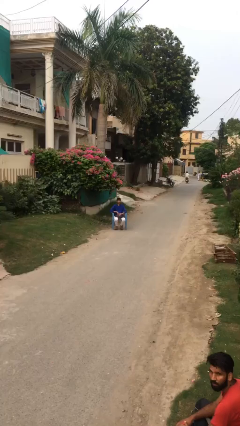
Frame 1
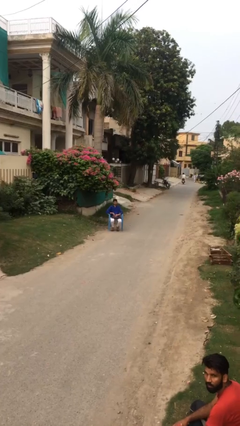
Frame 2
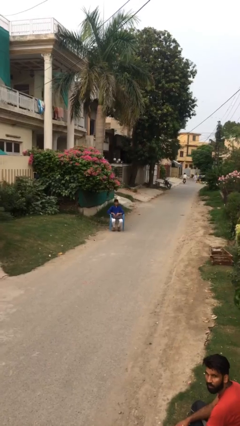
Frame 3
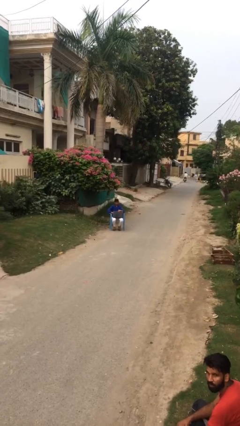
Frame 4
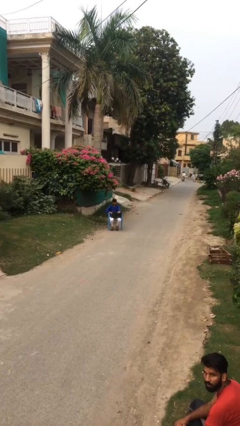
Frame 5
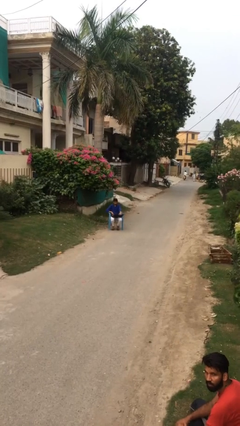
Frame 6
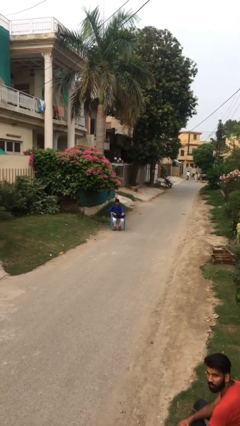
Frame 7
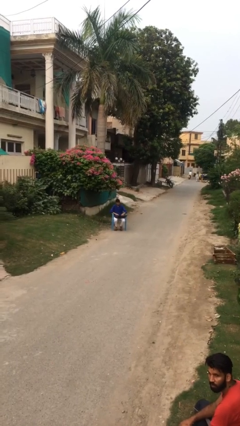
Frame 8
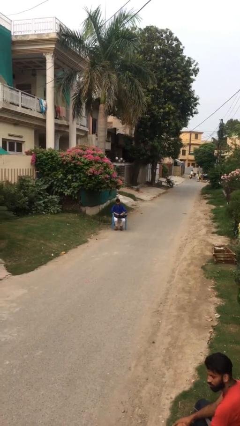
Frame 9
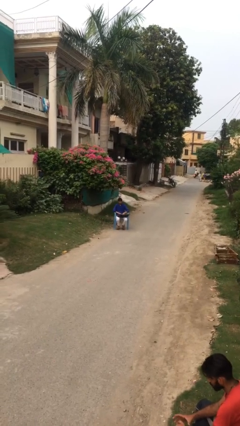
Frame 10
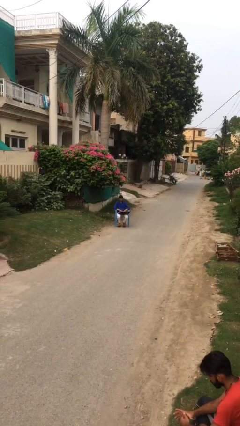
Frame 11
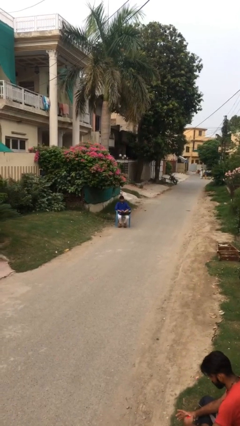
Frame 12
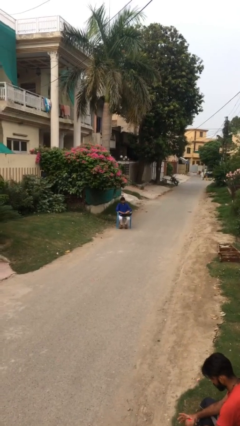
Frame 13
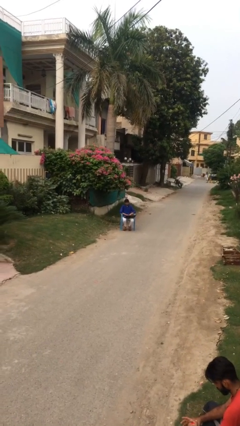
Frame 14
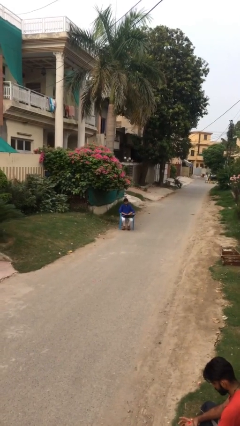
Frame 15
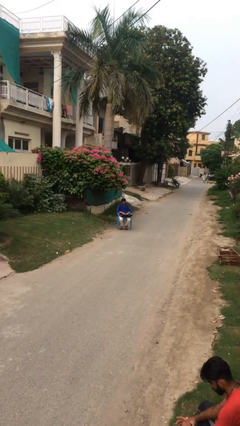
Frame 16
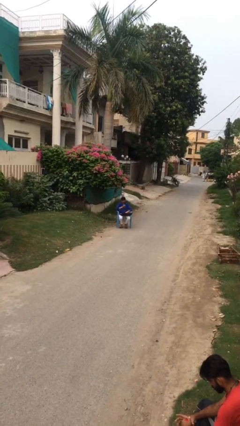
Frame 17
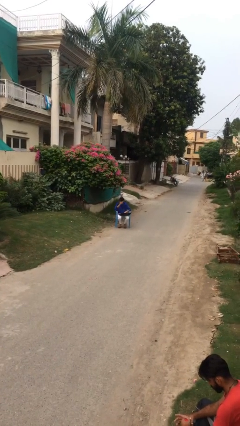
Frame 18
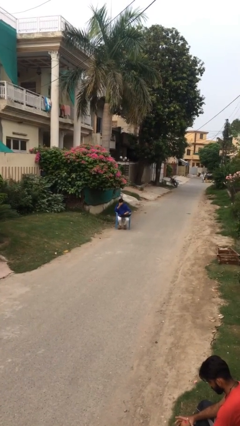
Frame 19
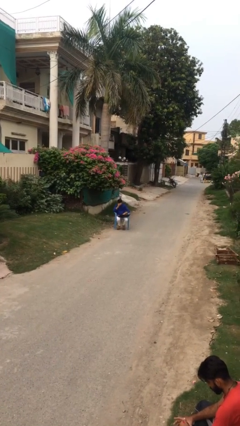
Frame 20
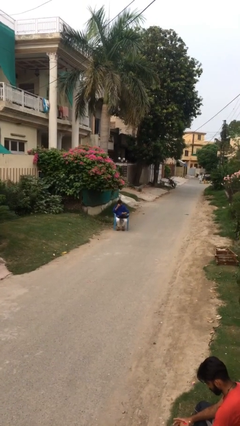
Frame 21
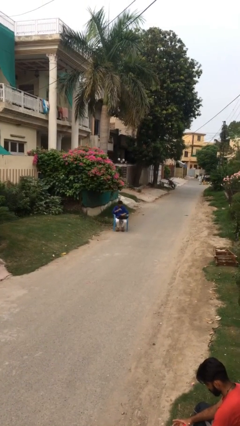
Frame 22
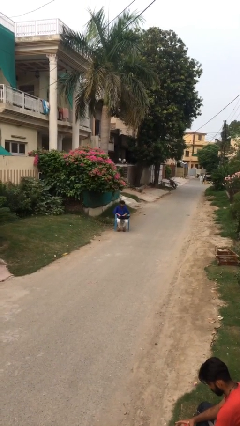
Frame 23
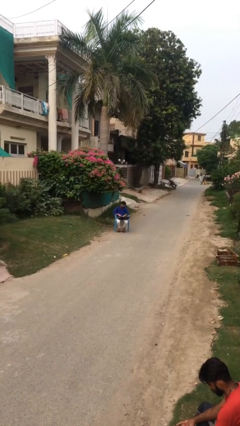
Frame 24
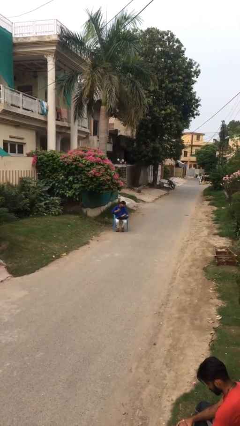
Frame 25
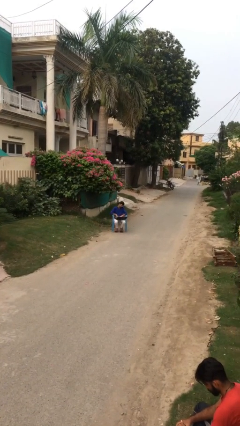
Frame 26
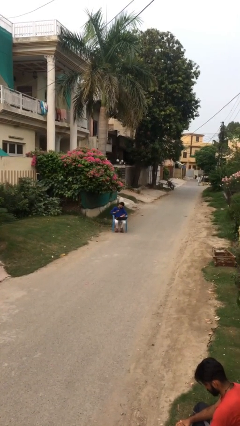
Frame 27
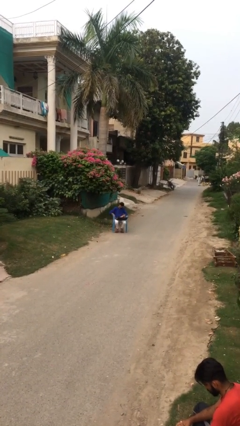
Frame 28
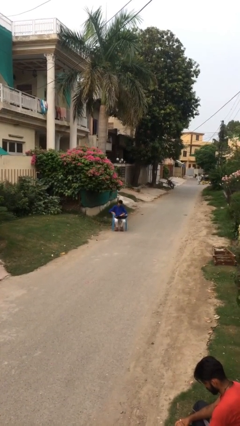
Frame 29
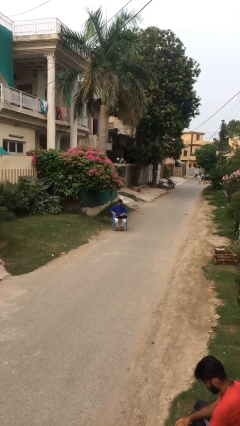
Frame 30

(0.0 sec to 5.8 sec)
person interacts with laptop

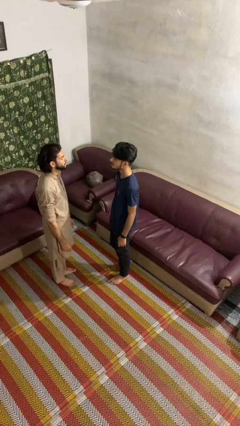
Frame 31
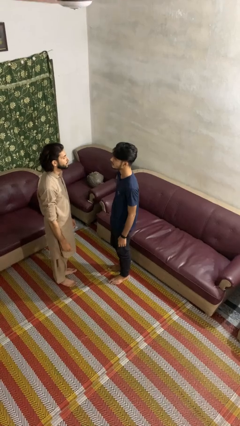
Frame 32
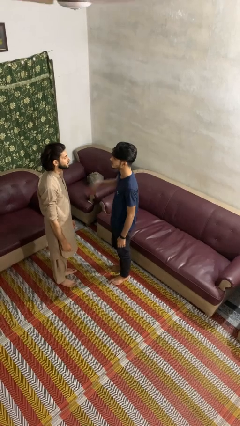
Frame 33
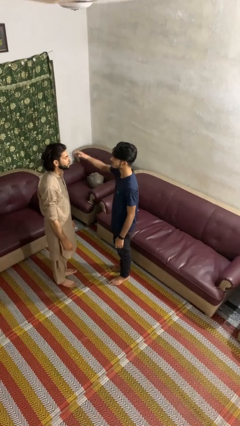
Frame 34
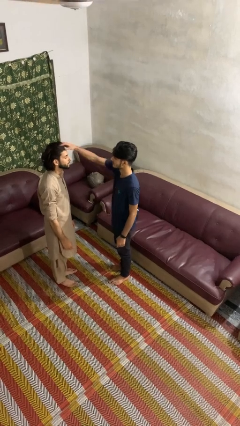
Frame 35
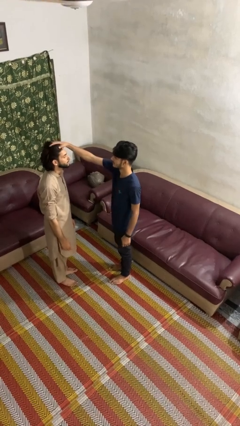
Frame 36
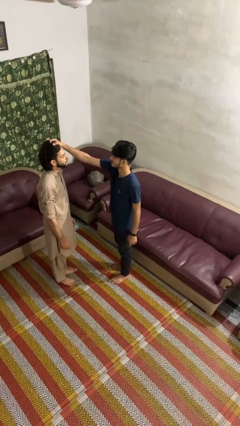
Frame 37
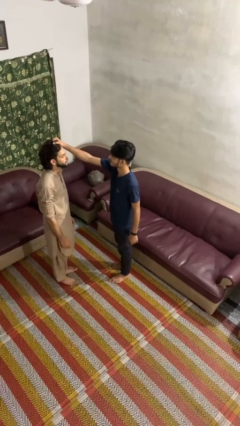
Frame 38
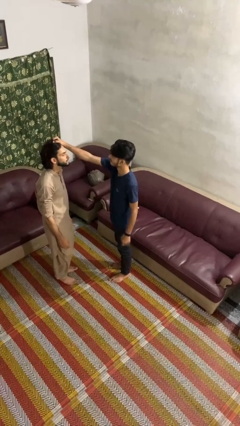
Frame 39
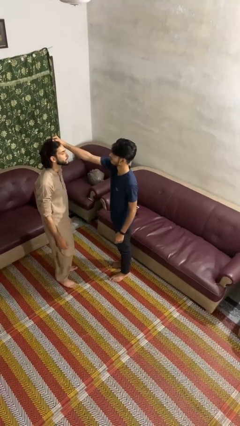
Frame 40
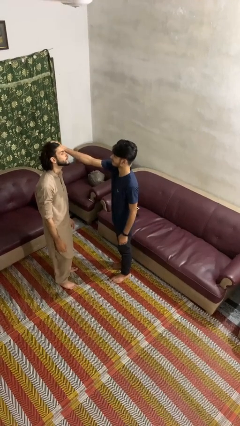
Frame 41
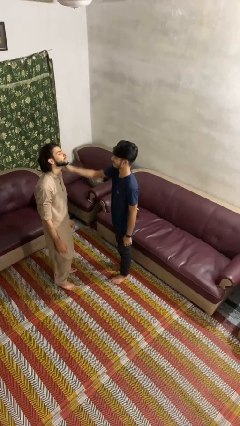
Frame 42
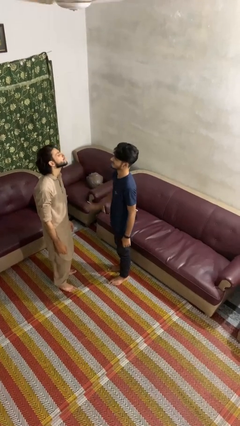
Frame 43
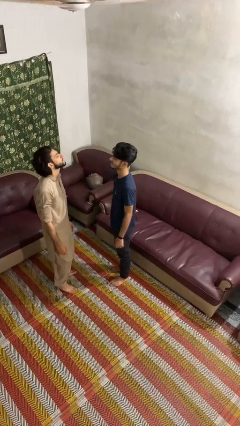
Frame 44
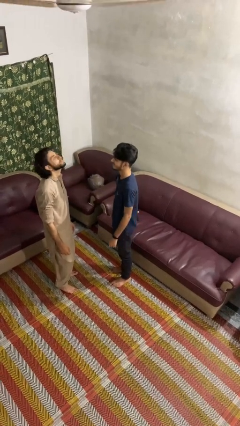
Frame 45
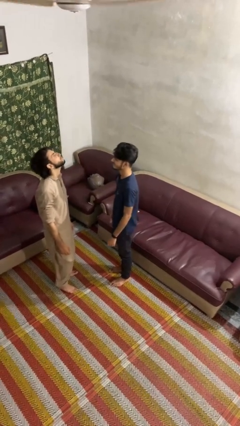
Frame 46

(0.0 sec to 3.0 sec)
person grabs person by hair

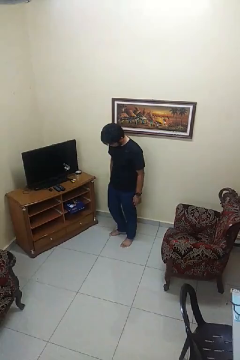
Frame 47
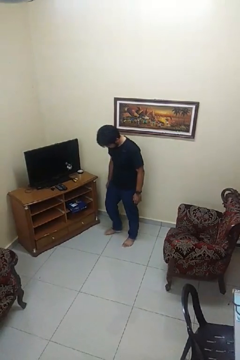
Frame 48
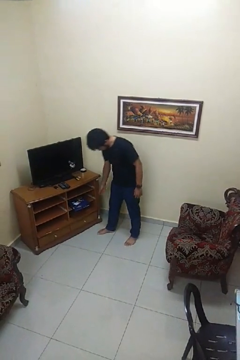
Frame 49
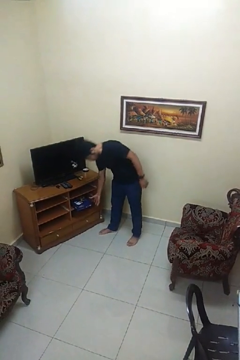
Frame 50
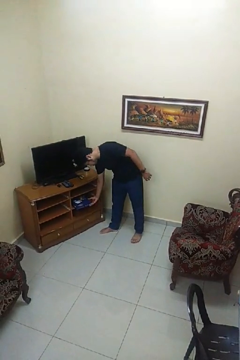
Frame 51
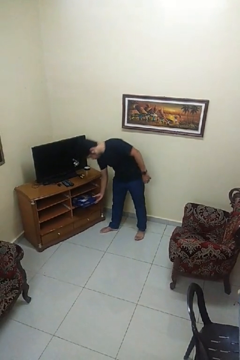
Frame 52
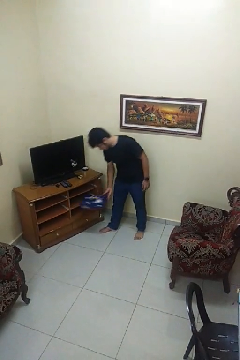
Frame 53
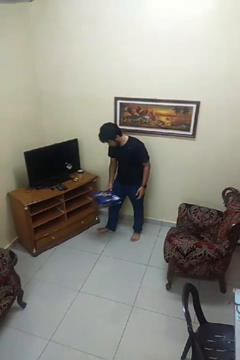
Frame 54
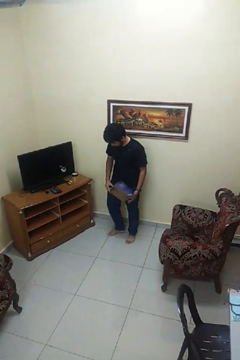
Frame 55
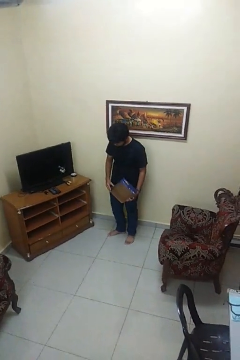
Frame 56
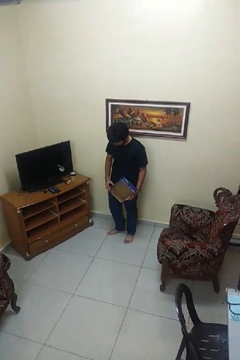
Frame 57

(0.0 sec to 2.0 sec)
person picks up object from cabinet

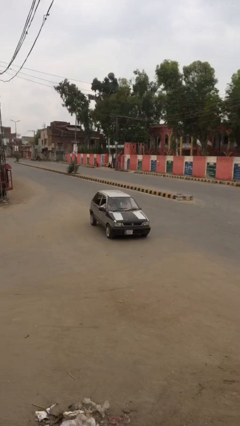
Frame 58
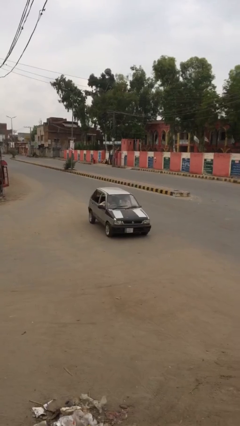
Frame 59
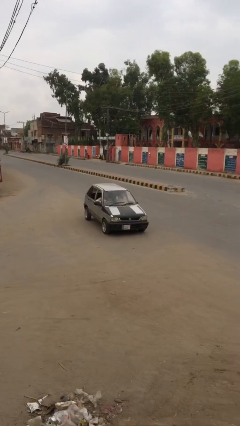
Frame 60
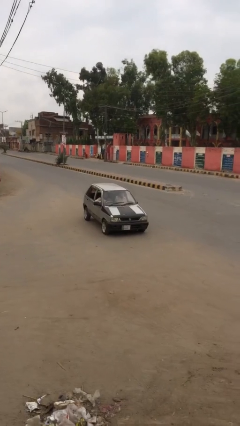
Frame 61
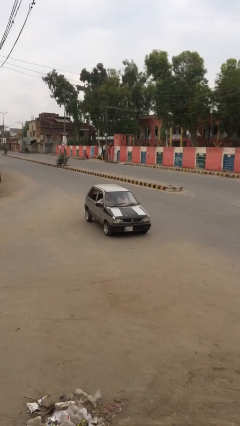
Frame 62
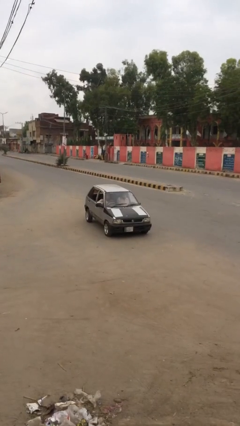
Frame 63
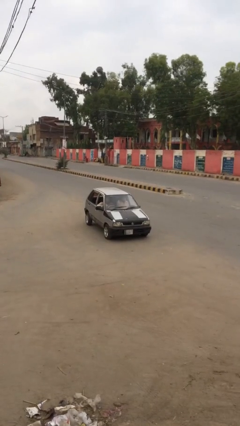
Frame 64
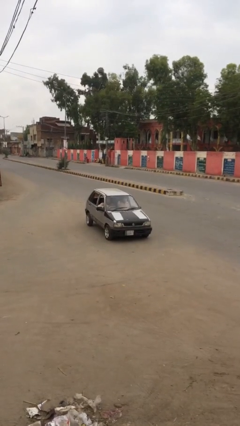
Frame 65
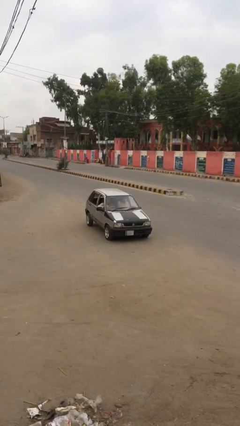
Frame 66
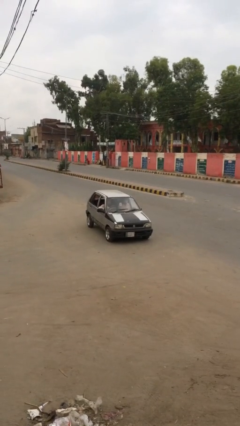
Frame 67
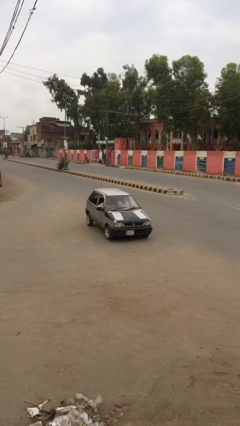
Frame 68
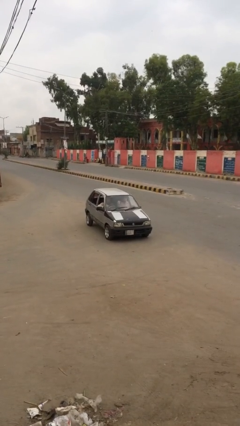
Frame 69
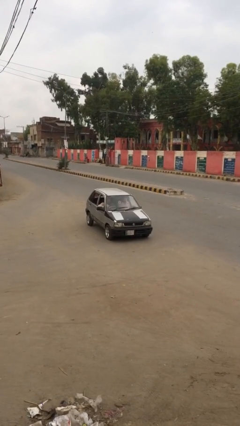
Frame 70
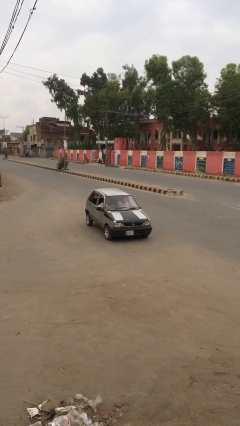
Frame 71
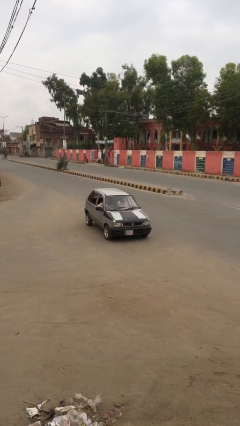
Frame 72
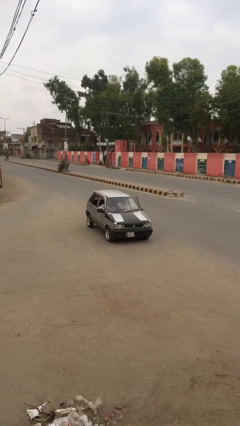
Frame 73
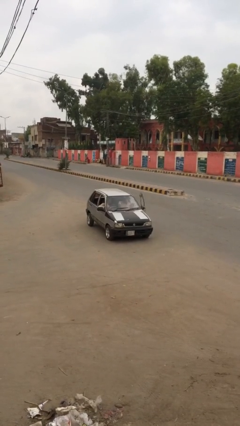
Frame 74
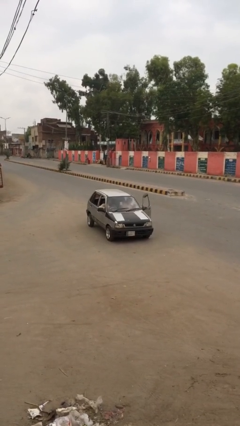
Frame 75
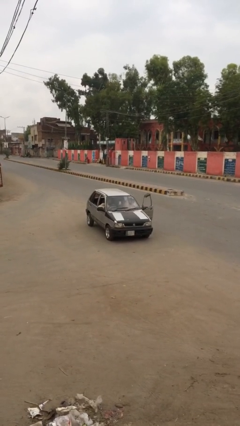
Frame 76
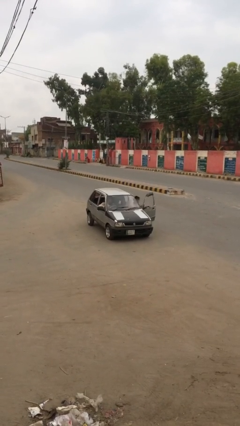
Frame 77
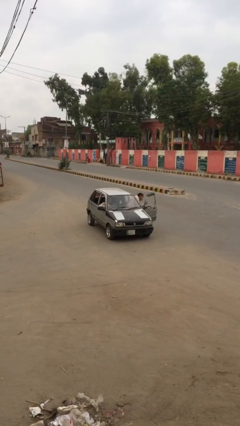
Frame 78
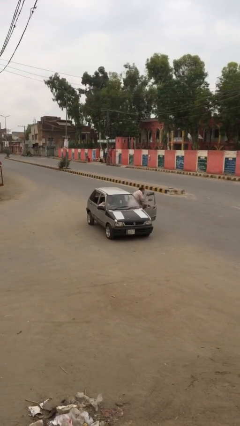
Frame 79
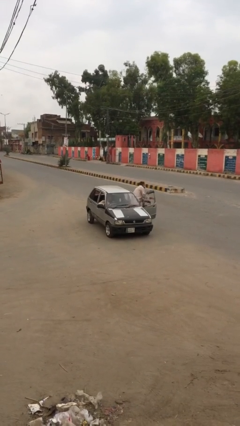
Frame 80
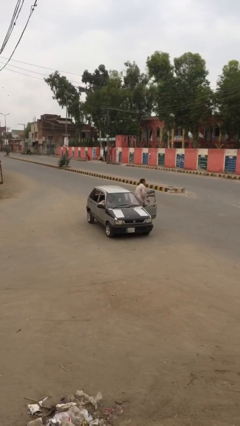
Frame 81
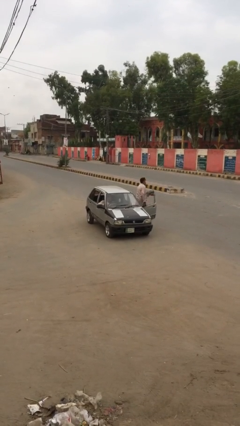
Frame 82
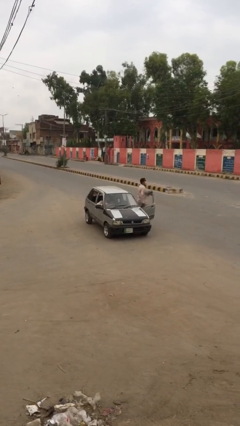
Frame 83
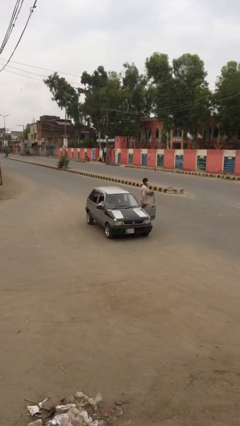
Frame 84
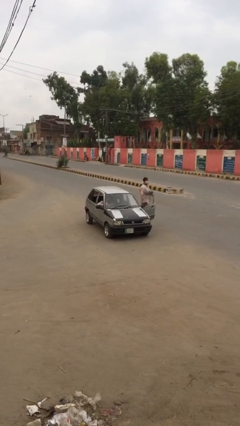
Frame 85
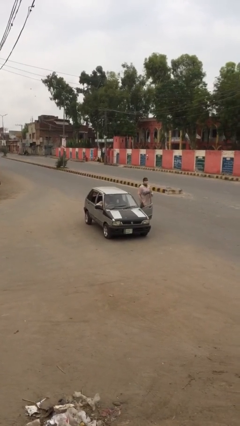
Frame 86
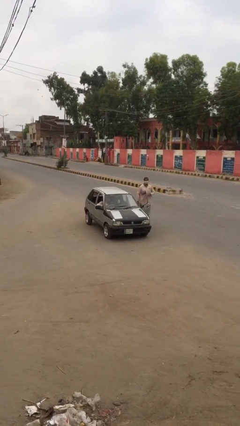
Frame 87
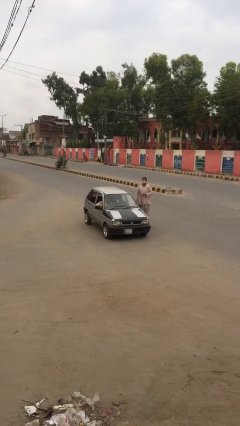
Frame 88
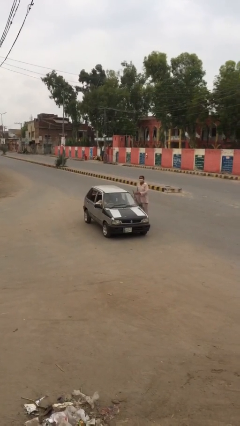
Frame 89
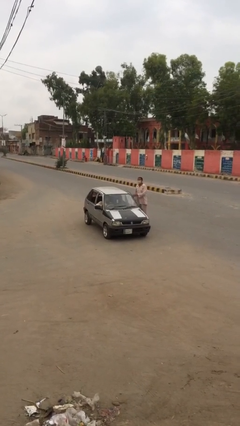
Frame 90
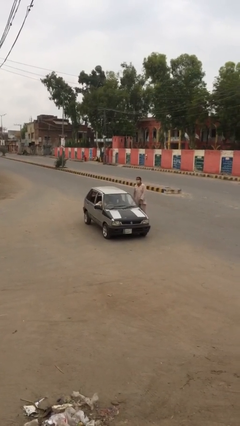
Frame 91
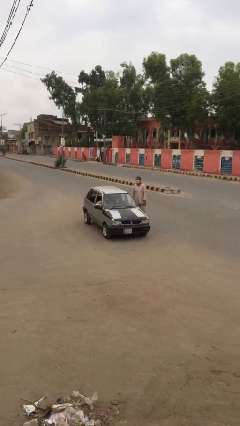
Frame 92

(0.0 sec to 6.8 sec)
car picks up person

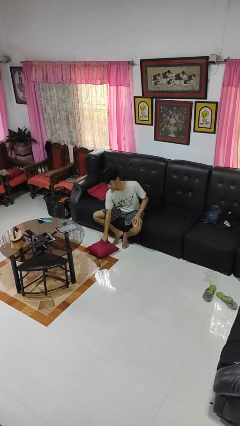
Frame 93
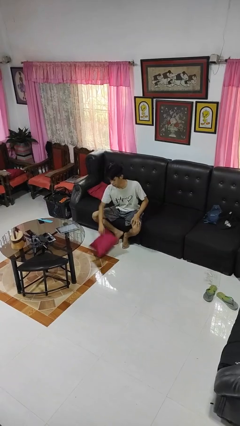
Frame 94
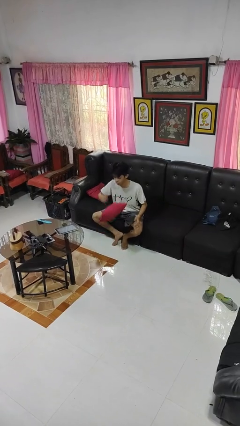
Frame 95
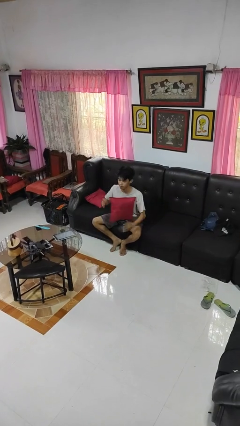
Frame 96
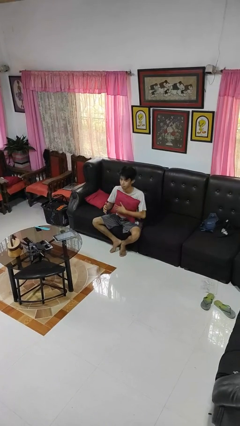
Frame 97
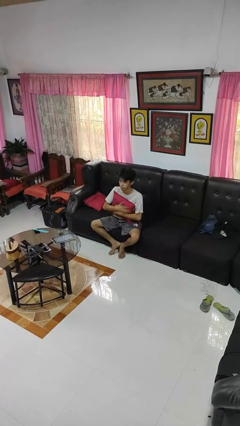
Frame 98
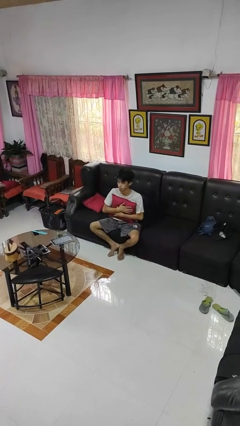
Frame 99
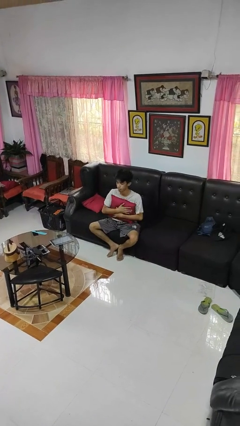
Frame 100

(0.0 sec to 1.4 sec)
person picks up object from floor
